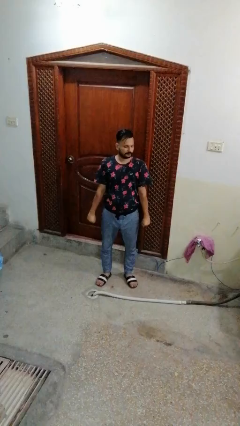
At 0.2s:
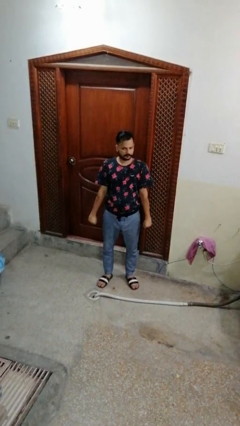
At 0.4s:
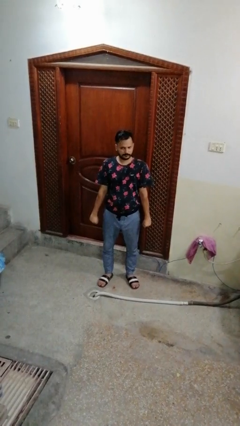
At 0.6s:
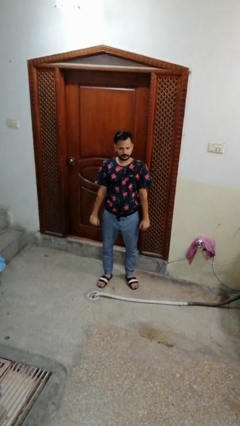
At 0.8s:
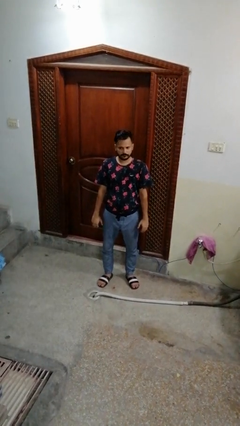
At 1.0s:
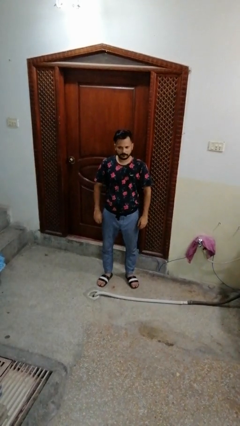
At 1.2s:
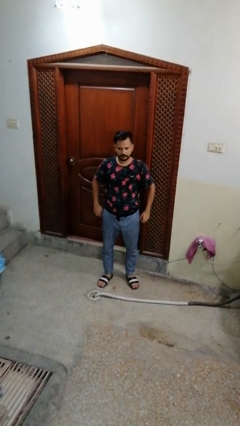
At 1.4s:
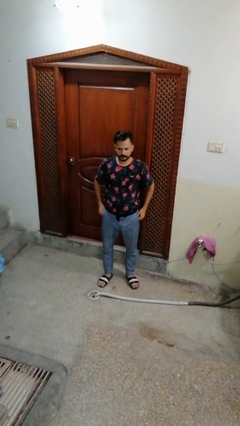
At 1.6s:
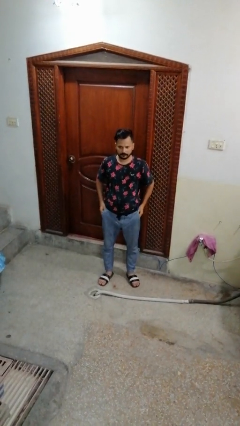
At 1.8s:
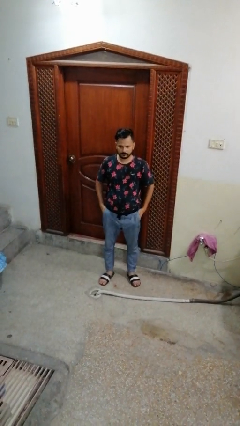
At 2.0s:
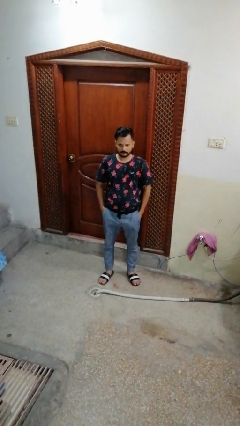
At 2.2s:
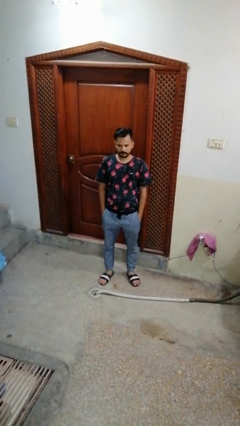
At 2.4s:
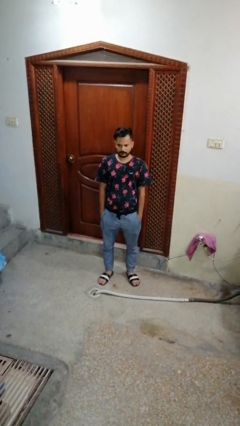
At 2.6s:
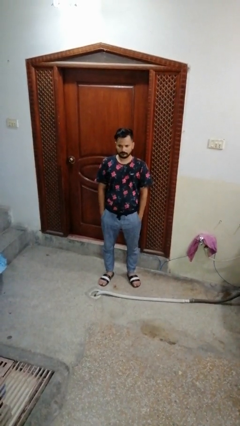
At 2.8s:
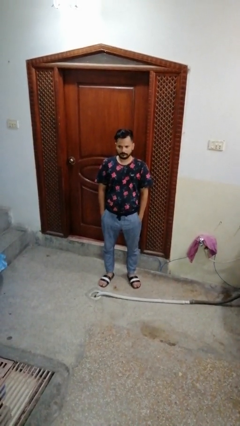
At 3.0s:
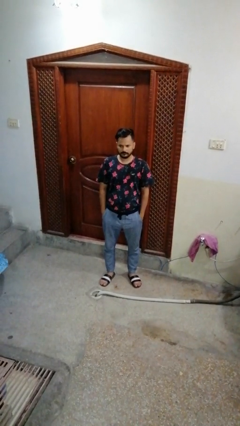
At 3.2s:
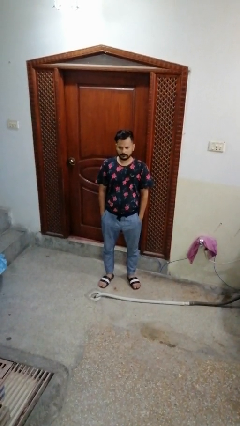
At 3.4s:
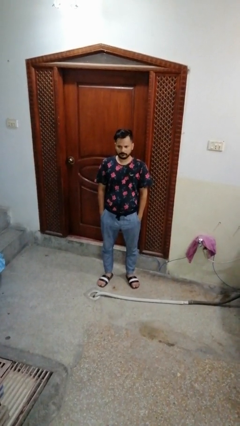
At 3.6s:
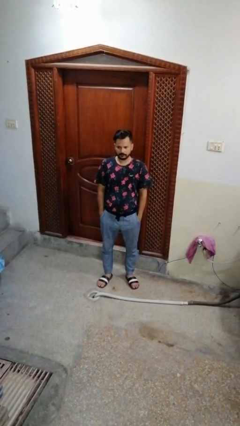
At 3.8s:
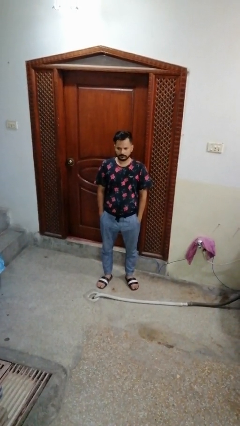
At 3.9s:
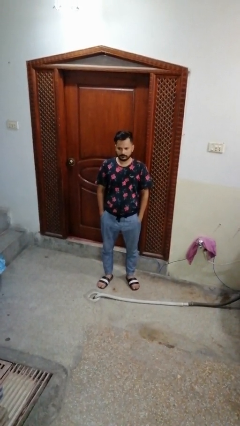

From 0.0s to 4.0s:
person puts hands in back pockets

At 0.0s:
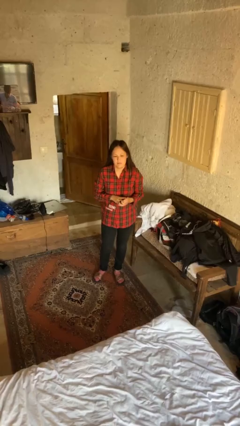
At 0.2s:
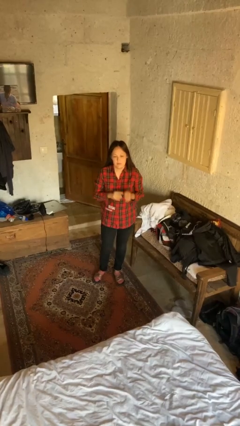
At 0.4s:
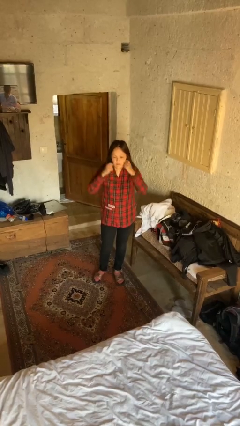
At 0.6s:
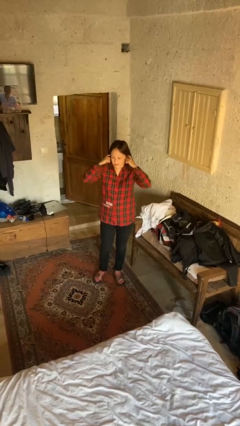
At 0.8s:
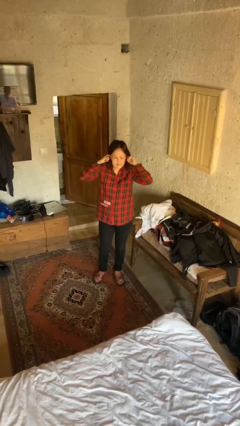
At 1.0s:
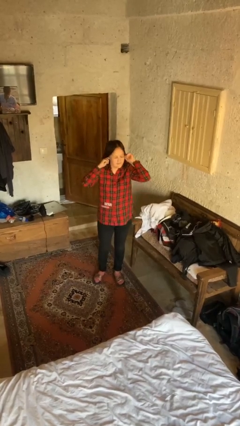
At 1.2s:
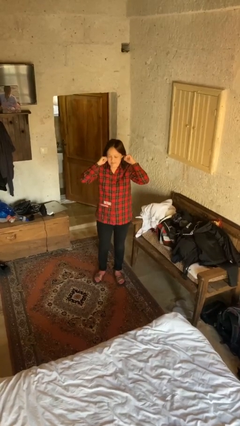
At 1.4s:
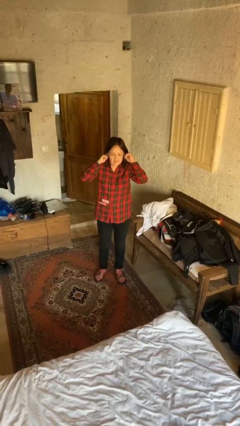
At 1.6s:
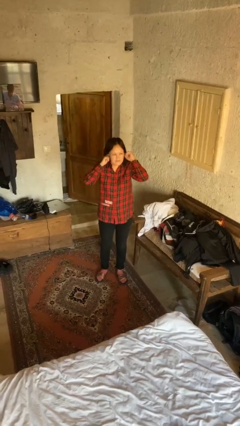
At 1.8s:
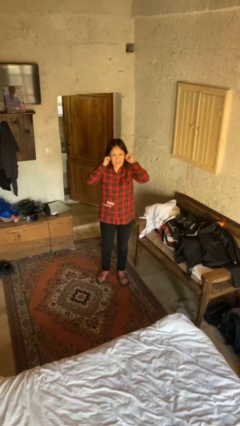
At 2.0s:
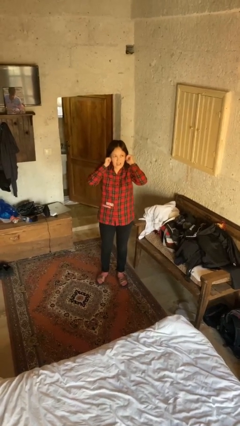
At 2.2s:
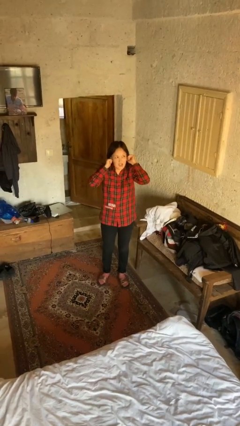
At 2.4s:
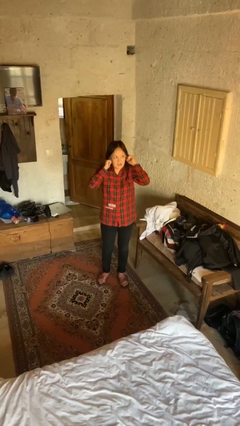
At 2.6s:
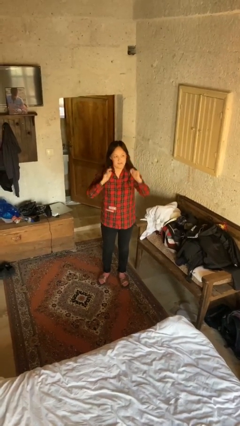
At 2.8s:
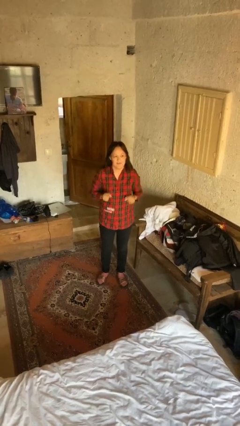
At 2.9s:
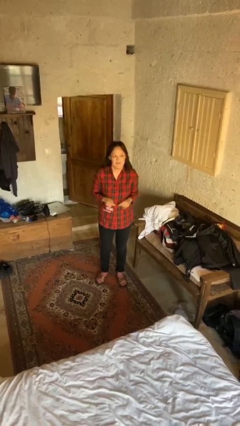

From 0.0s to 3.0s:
person puts fingers in ear

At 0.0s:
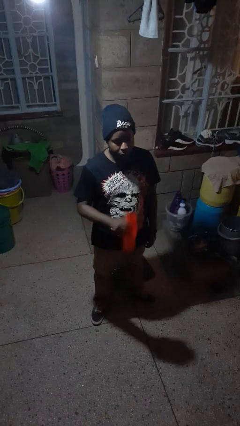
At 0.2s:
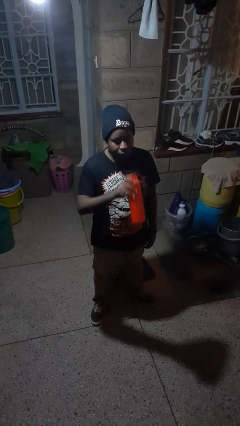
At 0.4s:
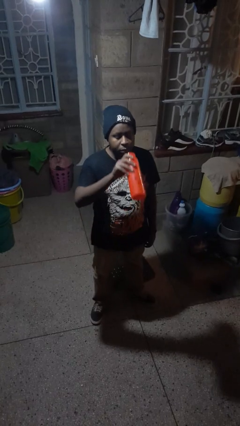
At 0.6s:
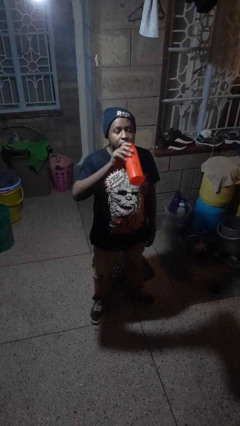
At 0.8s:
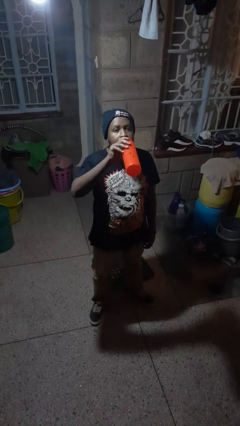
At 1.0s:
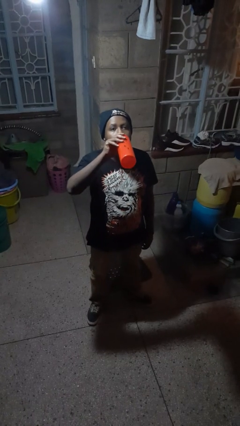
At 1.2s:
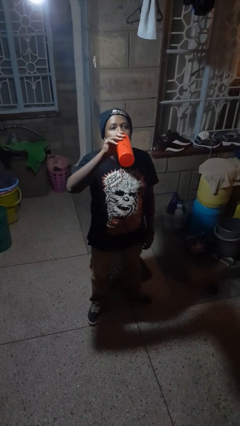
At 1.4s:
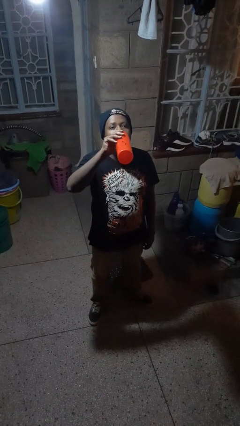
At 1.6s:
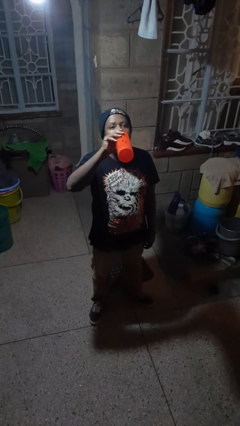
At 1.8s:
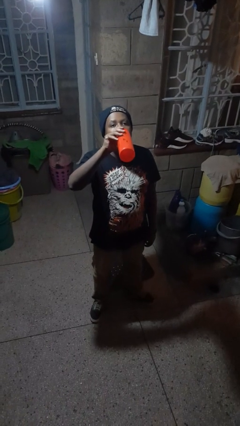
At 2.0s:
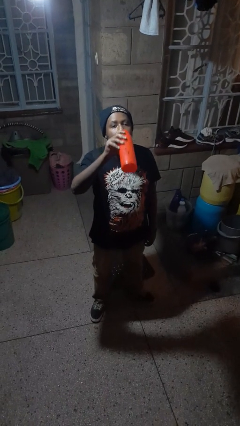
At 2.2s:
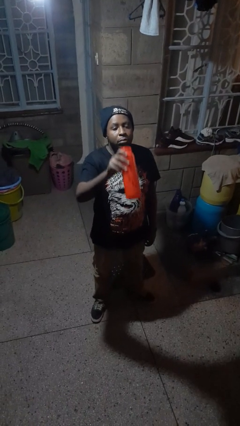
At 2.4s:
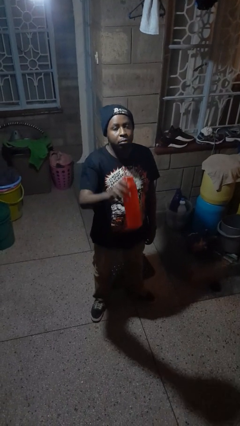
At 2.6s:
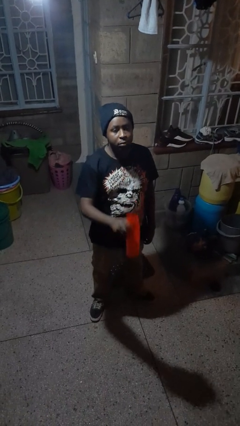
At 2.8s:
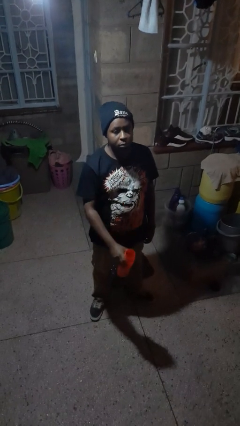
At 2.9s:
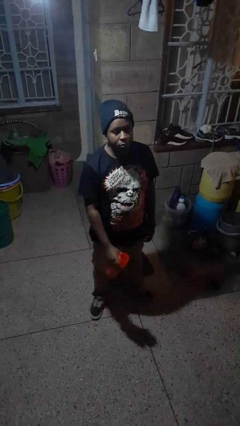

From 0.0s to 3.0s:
person drinks from bottle

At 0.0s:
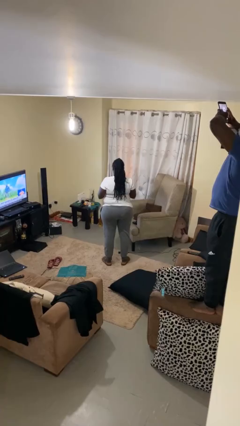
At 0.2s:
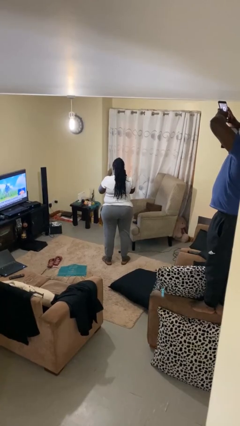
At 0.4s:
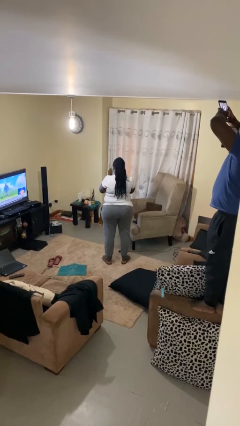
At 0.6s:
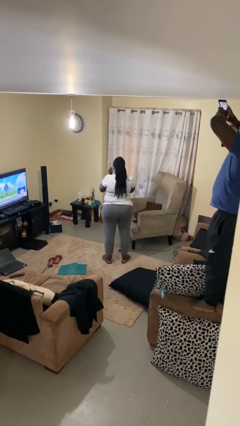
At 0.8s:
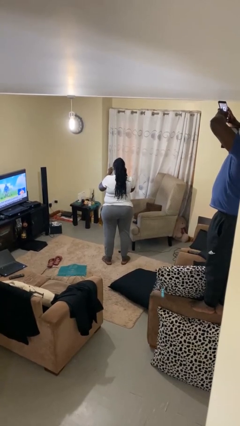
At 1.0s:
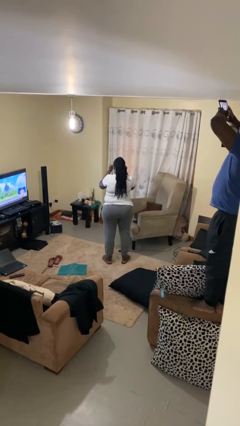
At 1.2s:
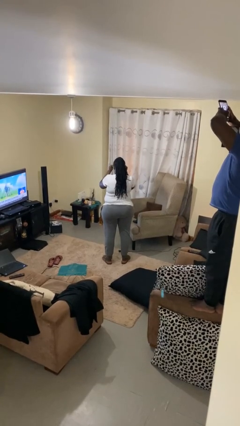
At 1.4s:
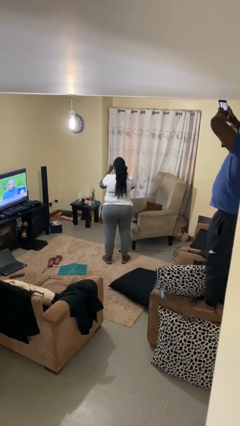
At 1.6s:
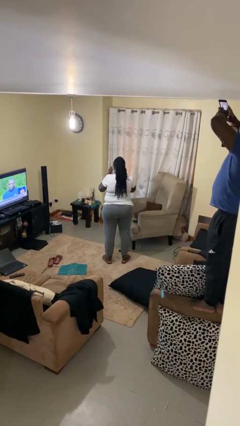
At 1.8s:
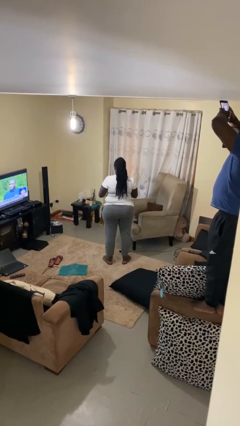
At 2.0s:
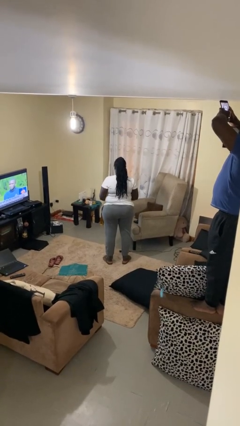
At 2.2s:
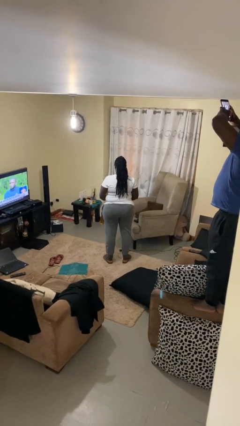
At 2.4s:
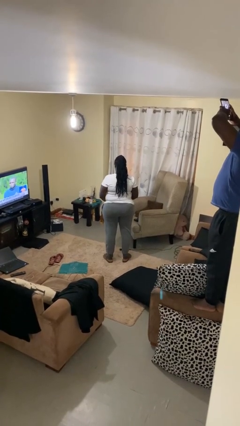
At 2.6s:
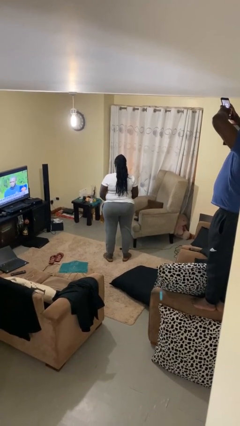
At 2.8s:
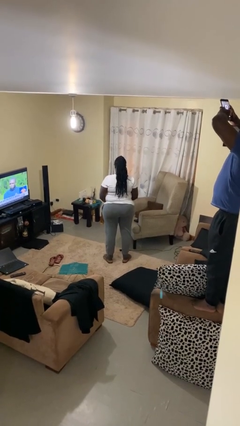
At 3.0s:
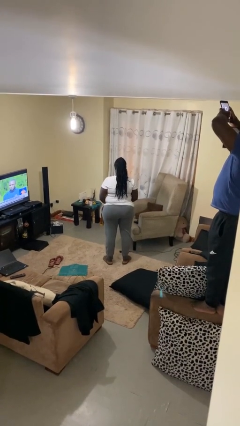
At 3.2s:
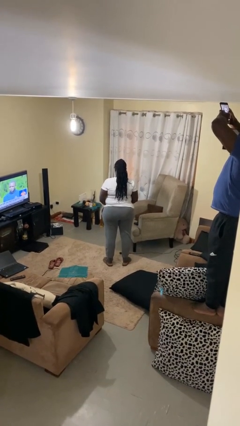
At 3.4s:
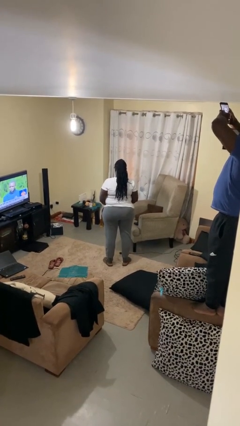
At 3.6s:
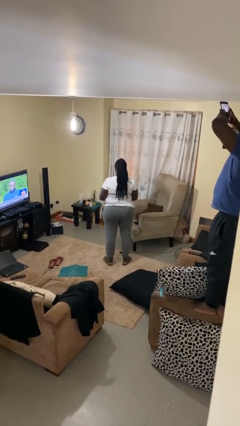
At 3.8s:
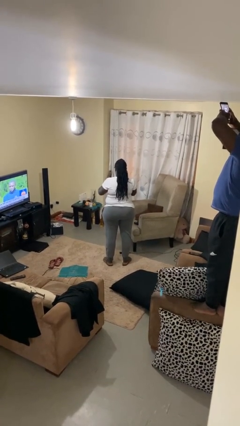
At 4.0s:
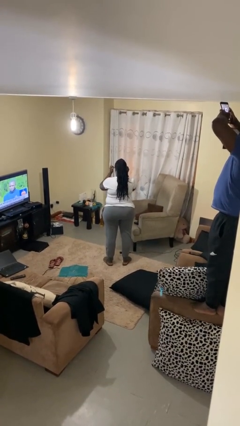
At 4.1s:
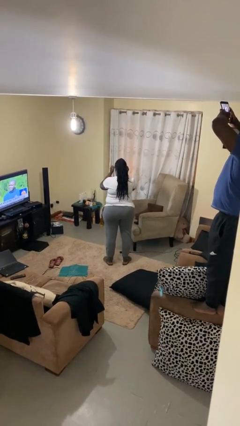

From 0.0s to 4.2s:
person puts on sunglasses

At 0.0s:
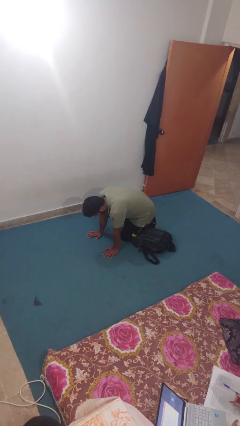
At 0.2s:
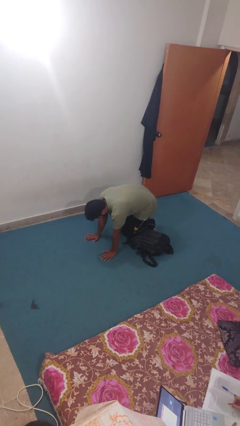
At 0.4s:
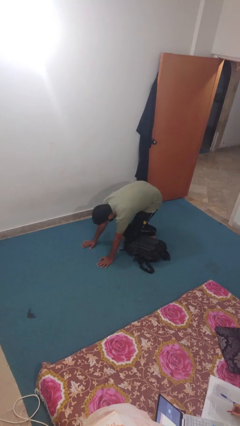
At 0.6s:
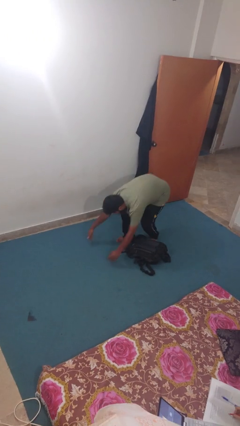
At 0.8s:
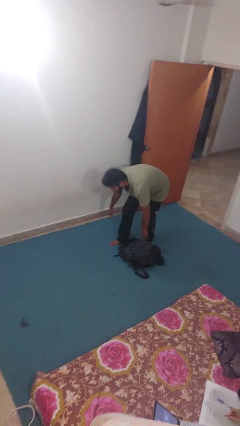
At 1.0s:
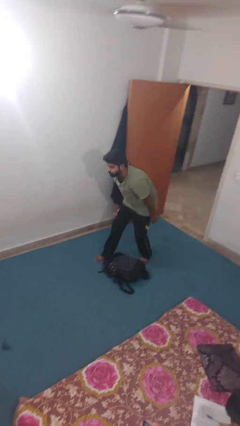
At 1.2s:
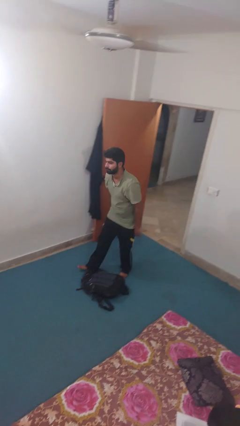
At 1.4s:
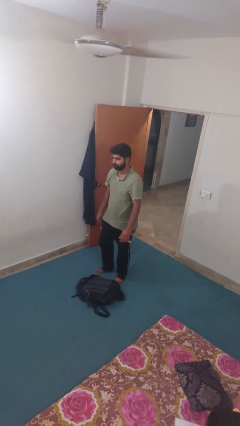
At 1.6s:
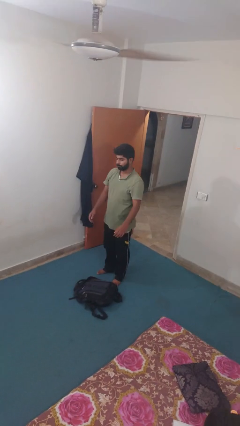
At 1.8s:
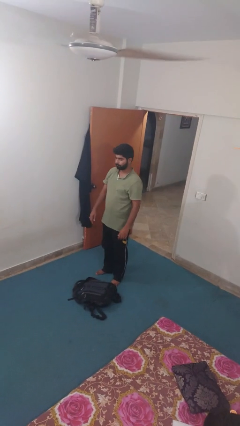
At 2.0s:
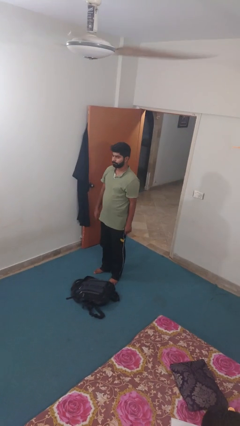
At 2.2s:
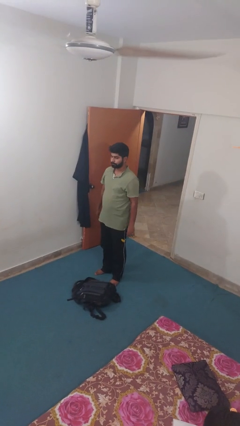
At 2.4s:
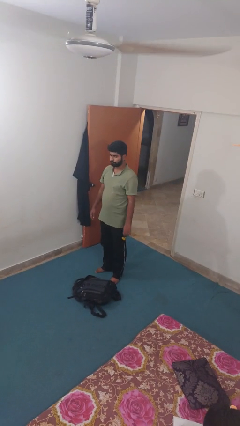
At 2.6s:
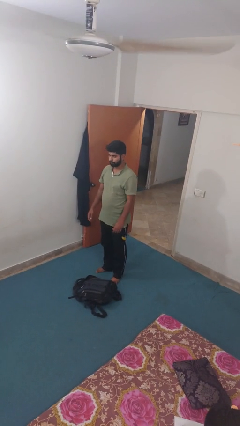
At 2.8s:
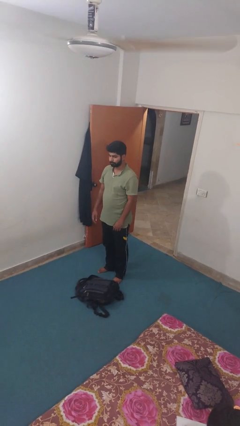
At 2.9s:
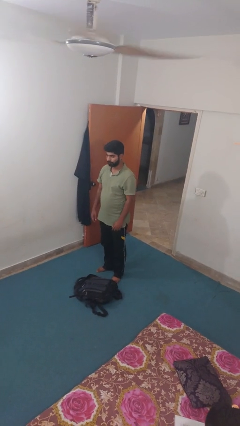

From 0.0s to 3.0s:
person stands up from floor

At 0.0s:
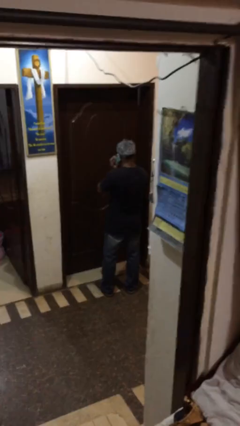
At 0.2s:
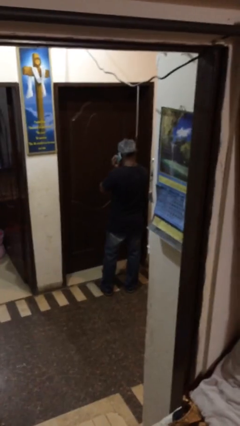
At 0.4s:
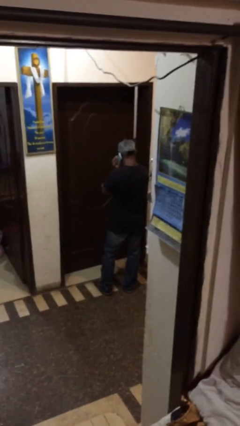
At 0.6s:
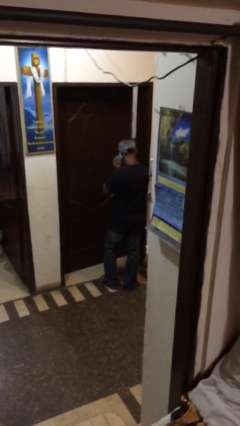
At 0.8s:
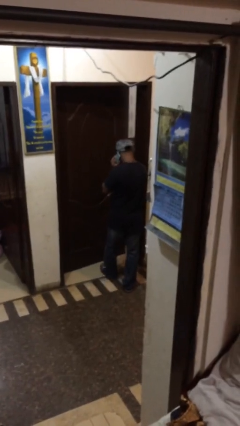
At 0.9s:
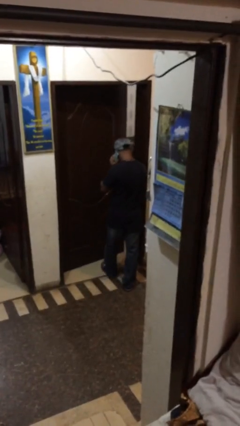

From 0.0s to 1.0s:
person opens facility door
